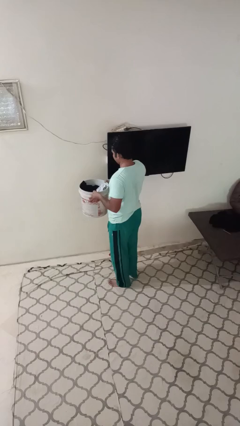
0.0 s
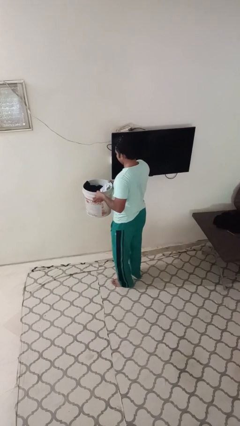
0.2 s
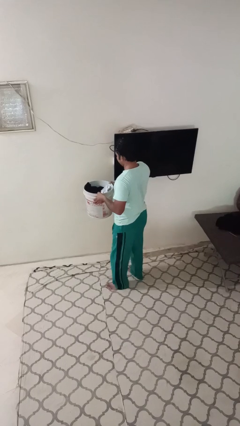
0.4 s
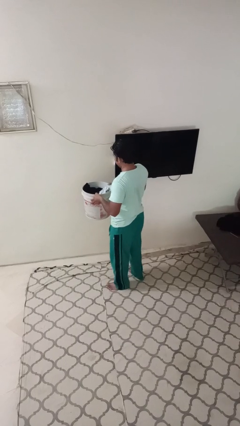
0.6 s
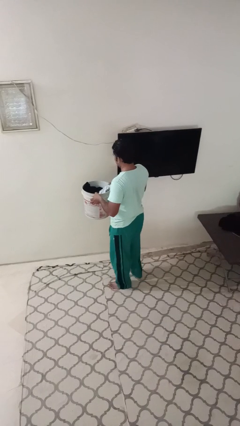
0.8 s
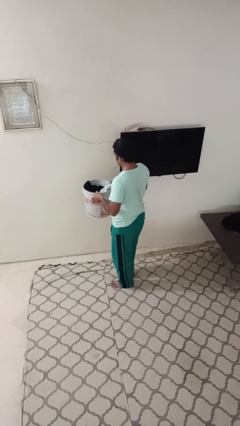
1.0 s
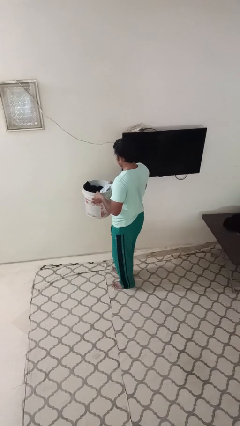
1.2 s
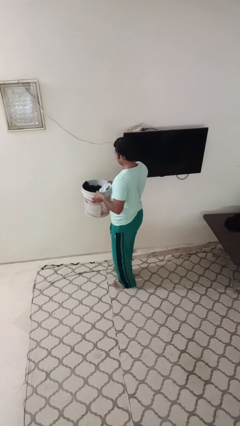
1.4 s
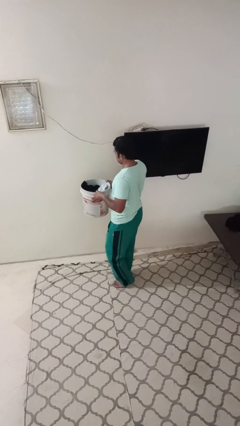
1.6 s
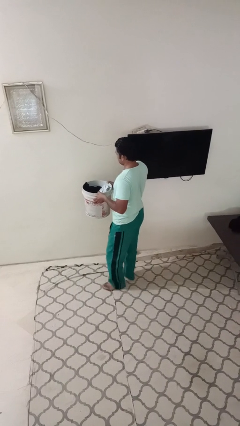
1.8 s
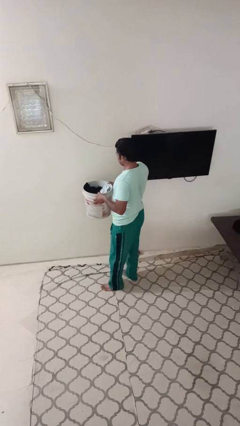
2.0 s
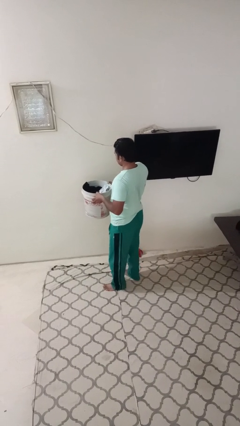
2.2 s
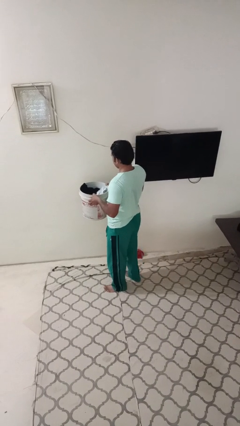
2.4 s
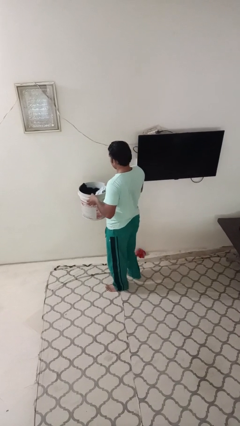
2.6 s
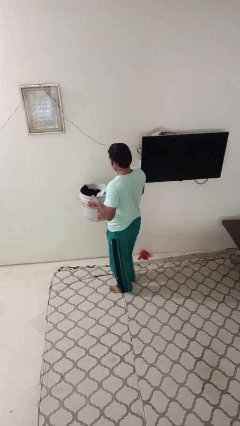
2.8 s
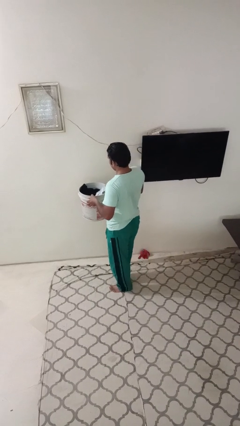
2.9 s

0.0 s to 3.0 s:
person carries laundry basket

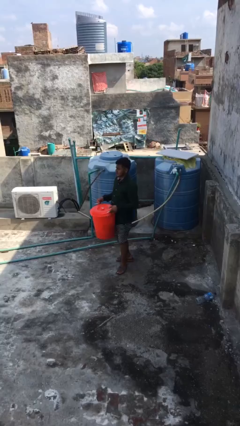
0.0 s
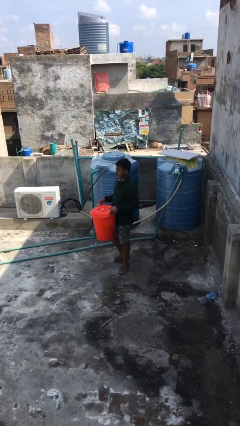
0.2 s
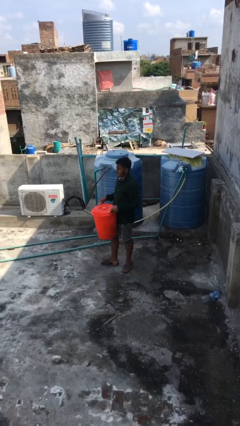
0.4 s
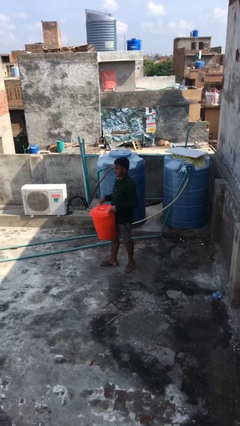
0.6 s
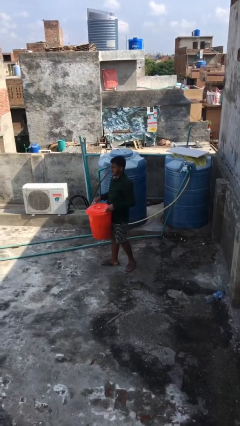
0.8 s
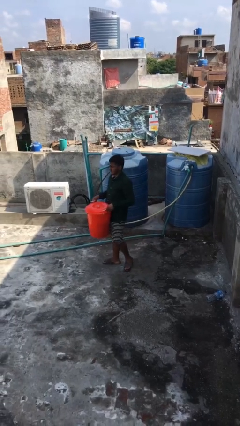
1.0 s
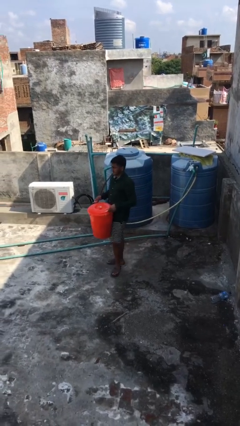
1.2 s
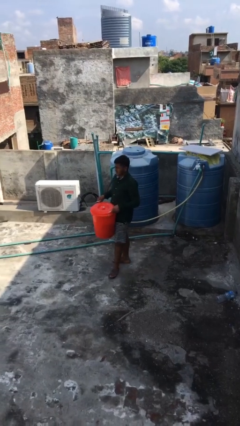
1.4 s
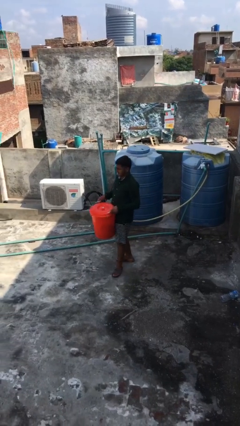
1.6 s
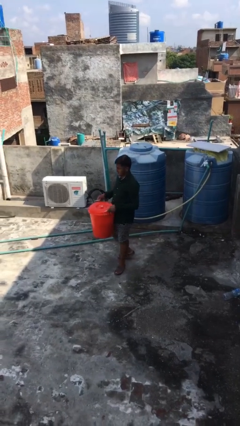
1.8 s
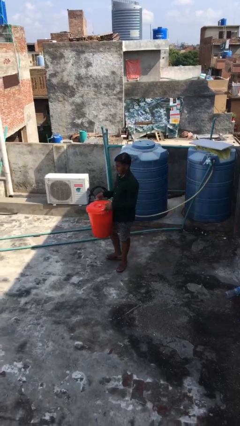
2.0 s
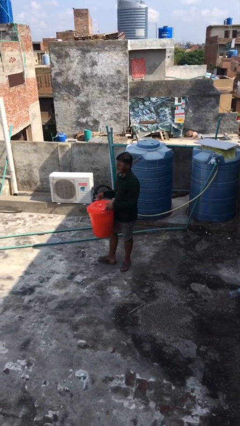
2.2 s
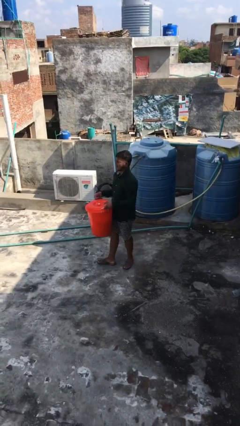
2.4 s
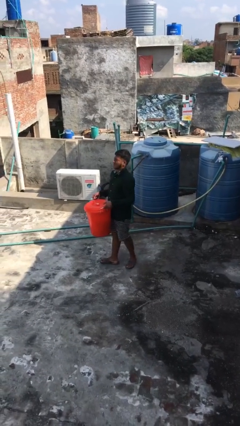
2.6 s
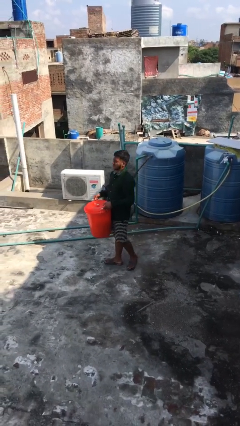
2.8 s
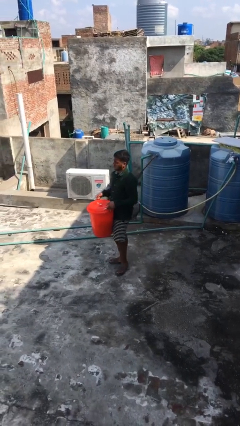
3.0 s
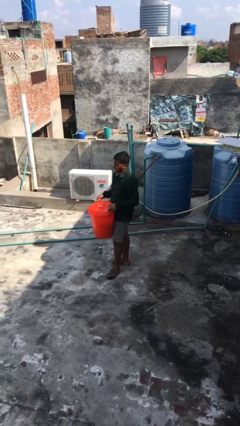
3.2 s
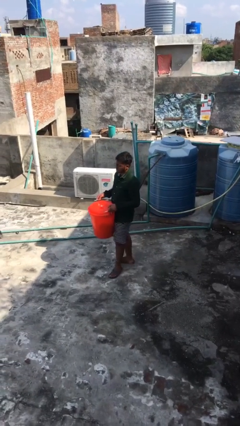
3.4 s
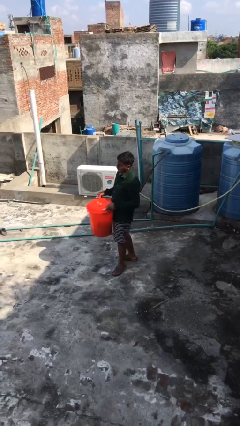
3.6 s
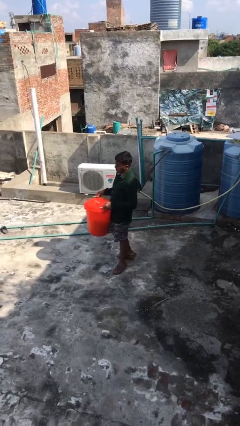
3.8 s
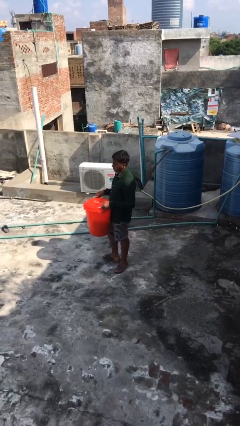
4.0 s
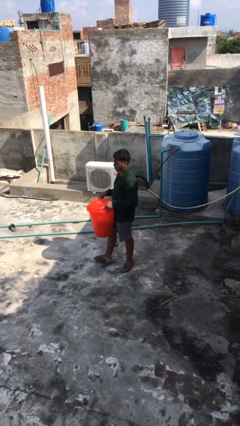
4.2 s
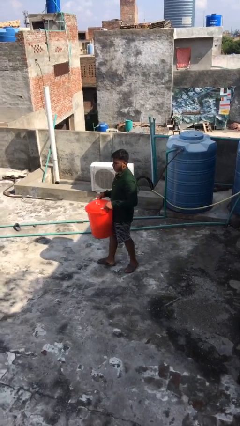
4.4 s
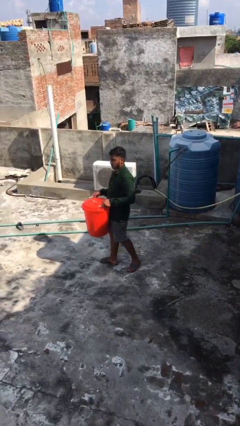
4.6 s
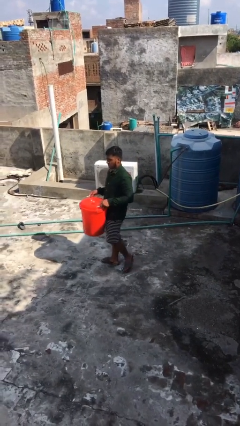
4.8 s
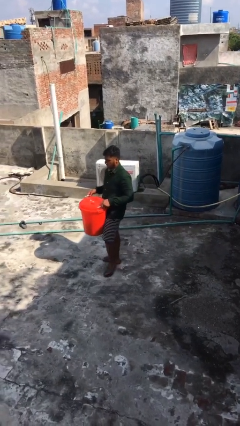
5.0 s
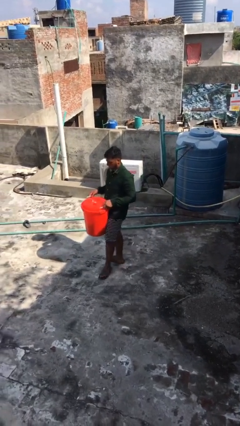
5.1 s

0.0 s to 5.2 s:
person carries heavy object

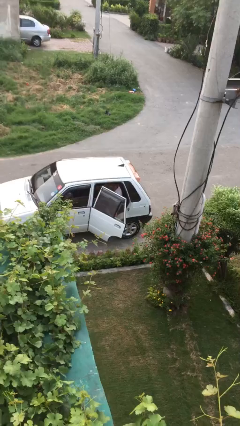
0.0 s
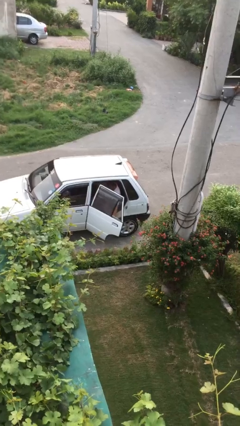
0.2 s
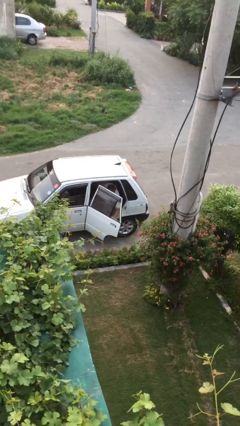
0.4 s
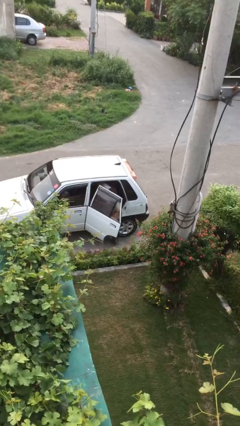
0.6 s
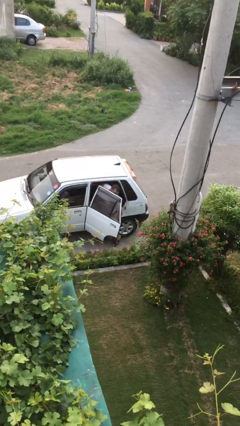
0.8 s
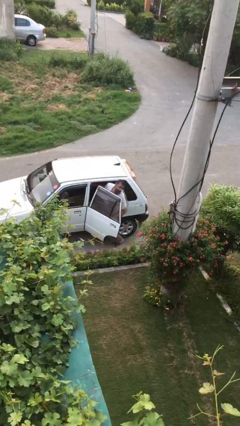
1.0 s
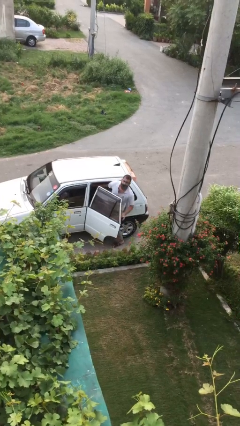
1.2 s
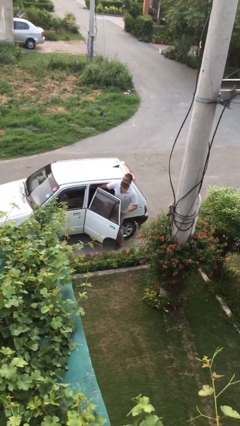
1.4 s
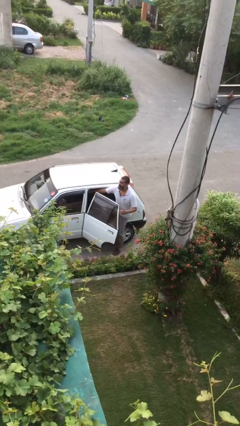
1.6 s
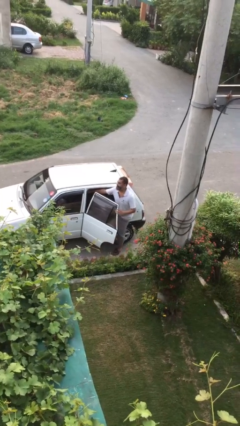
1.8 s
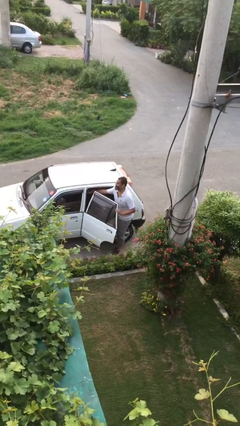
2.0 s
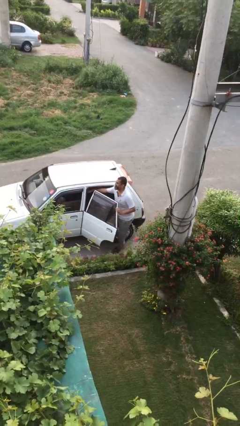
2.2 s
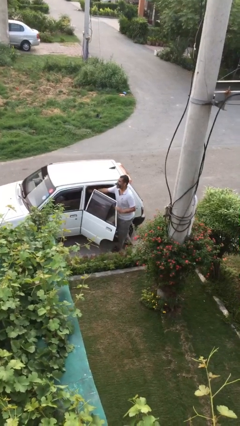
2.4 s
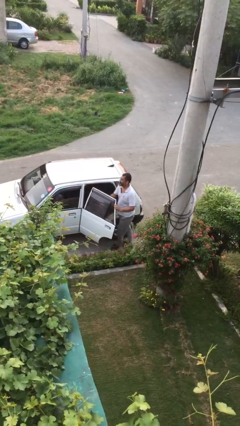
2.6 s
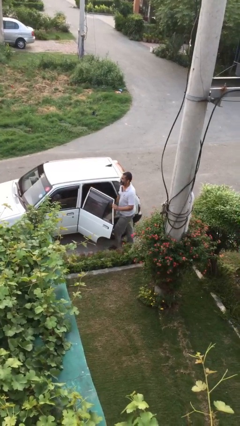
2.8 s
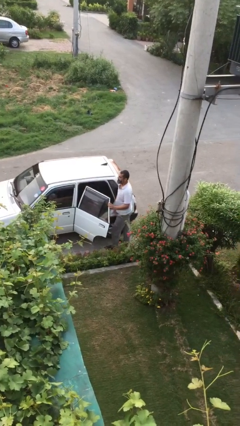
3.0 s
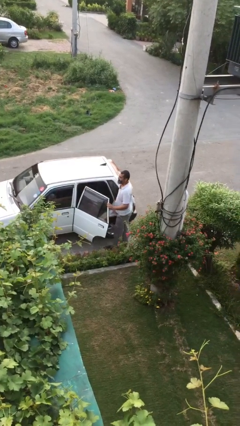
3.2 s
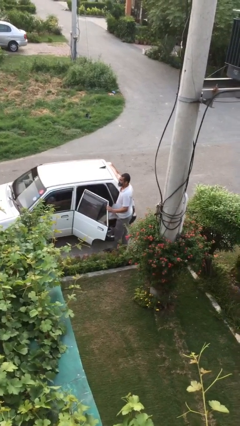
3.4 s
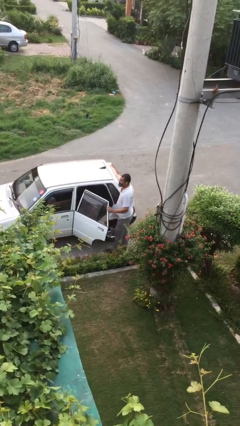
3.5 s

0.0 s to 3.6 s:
person exits car

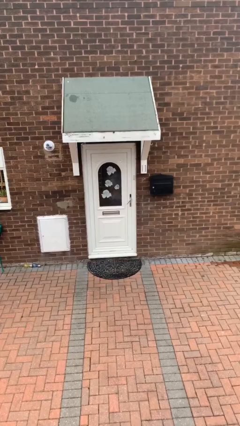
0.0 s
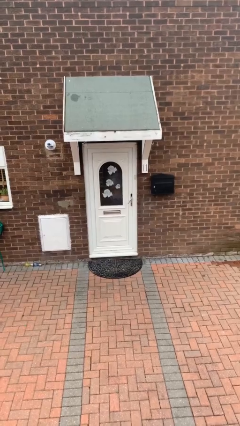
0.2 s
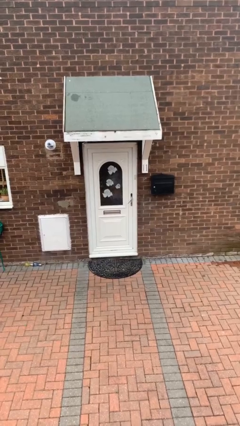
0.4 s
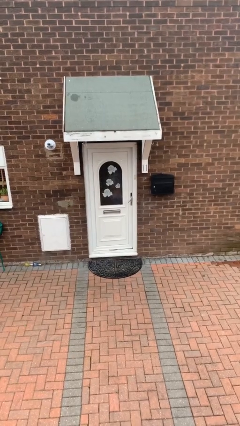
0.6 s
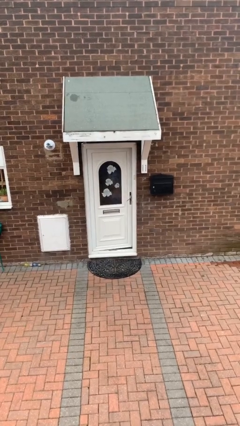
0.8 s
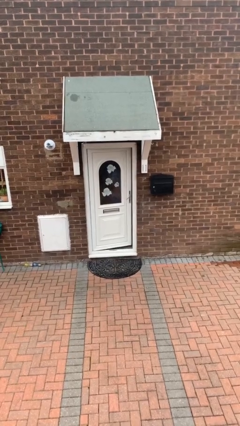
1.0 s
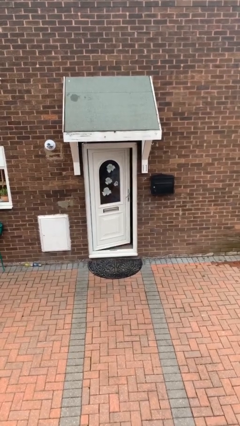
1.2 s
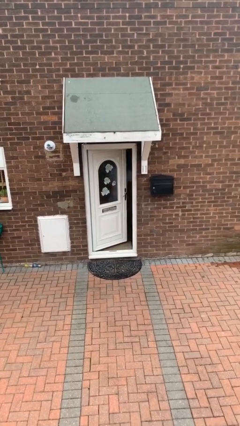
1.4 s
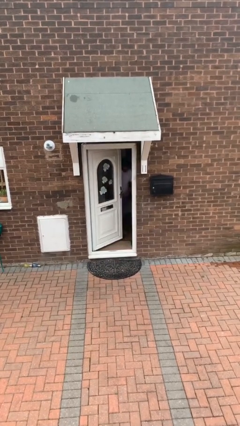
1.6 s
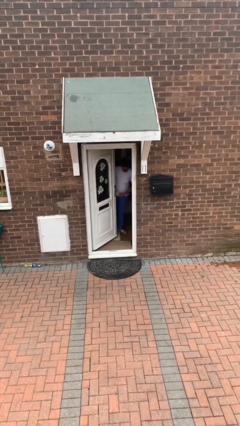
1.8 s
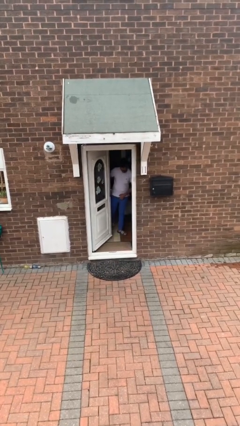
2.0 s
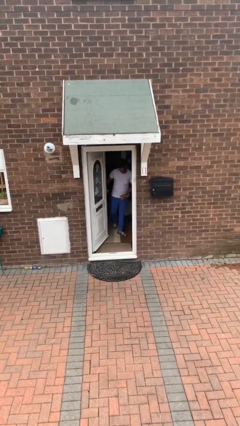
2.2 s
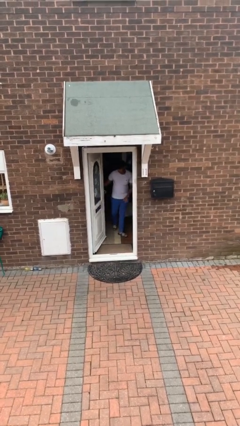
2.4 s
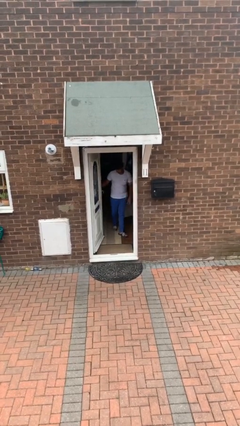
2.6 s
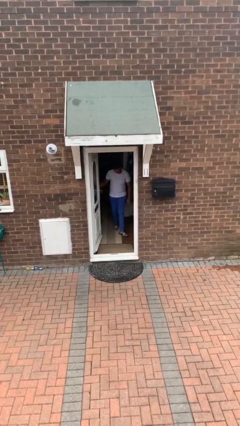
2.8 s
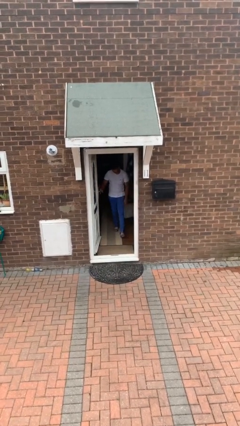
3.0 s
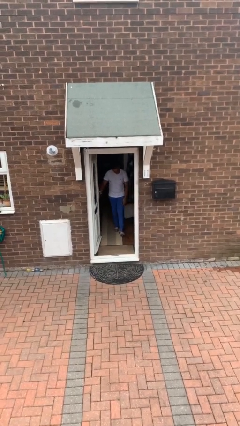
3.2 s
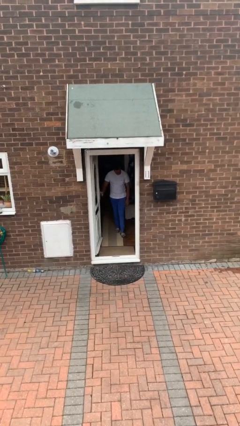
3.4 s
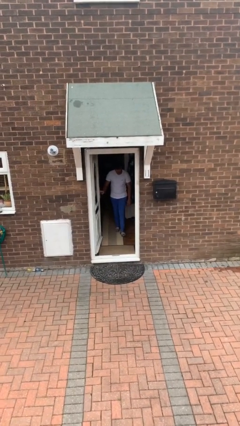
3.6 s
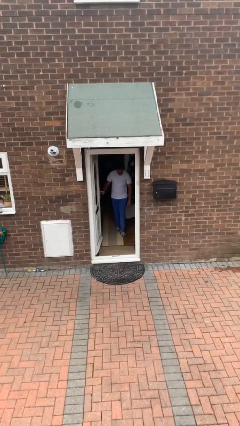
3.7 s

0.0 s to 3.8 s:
person opens facility door

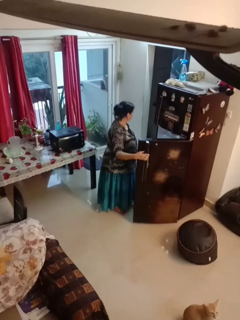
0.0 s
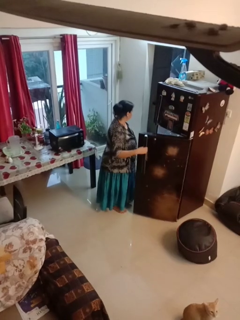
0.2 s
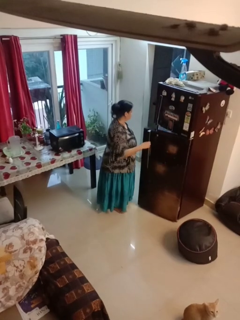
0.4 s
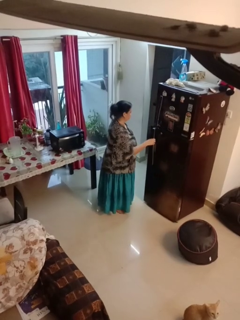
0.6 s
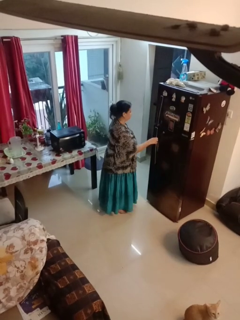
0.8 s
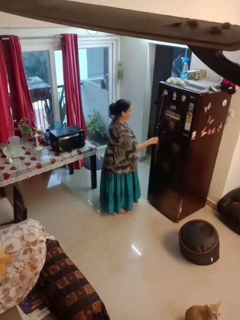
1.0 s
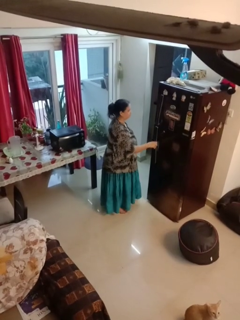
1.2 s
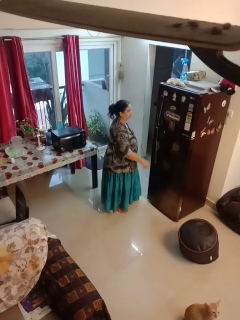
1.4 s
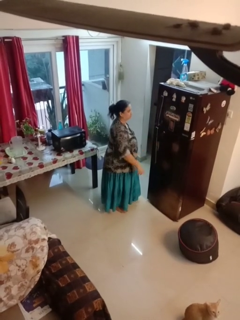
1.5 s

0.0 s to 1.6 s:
person closes refrigerator

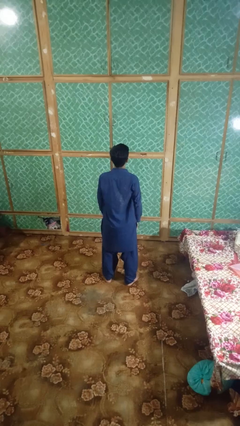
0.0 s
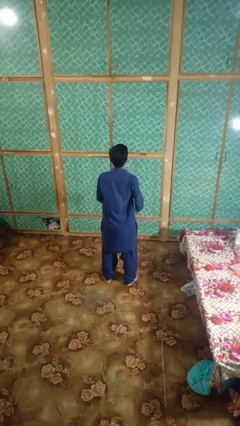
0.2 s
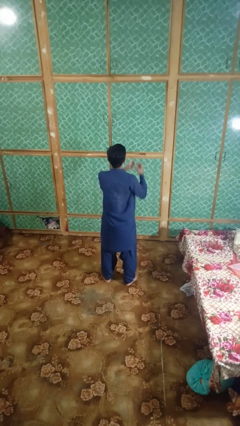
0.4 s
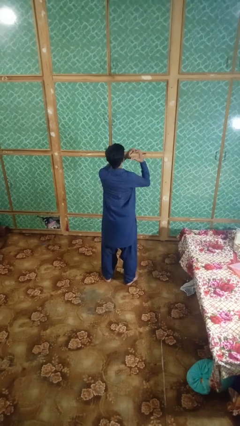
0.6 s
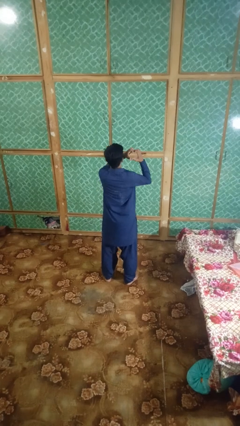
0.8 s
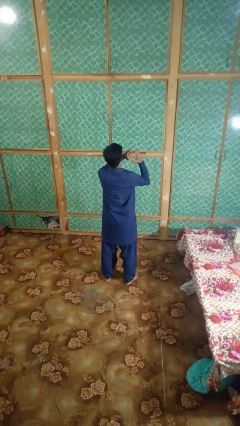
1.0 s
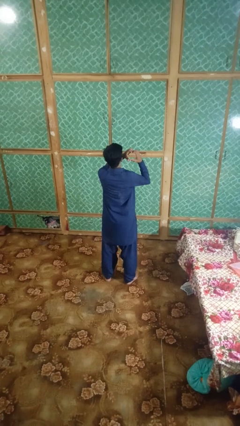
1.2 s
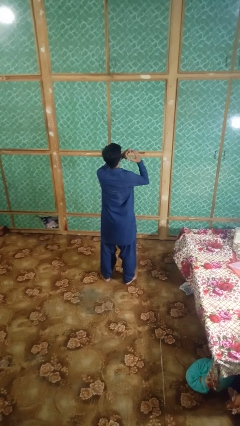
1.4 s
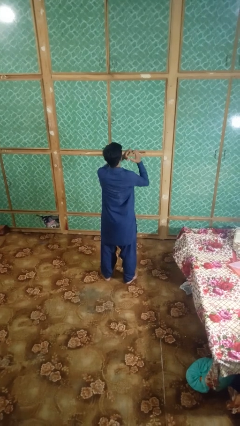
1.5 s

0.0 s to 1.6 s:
person gestures heart
